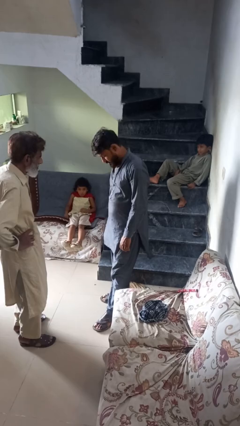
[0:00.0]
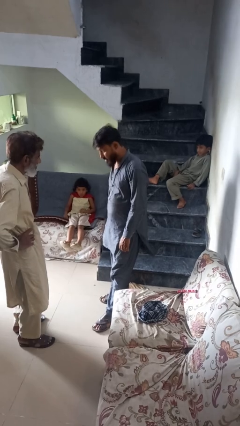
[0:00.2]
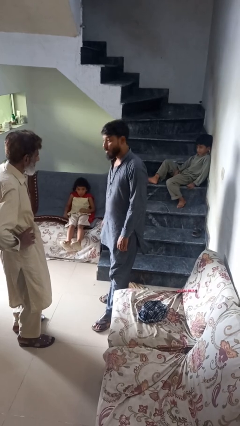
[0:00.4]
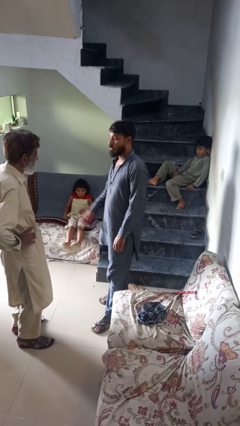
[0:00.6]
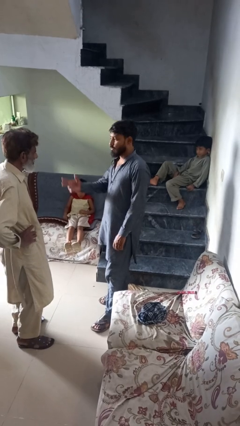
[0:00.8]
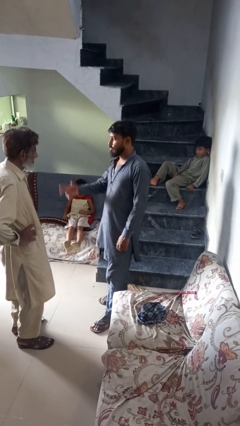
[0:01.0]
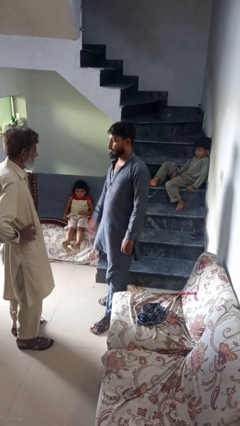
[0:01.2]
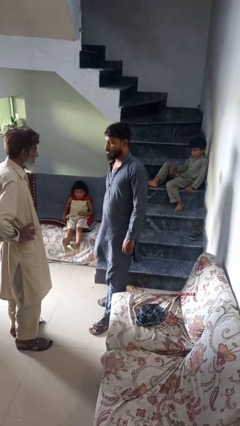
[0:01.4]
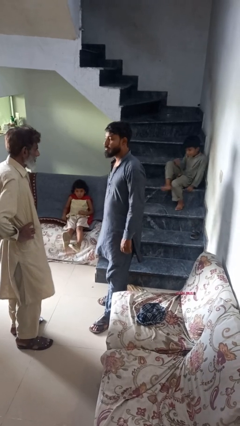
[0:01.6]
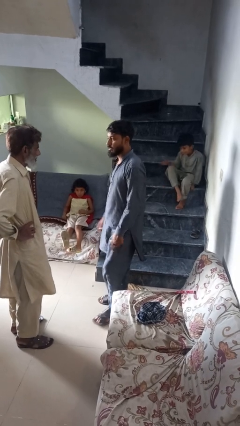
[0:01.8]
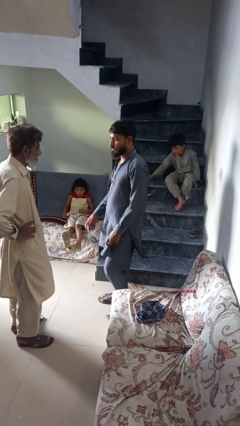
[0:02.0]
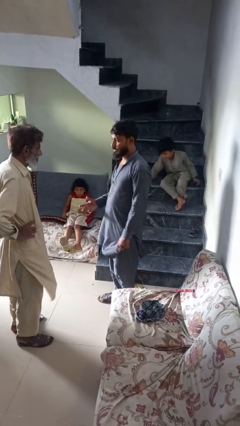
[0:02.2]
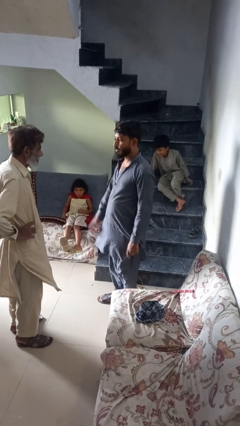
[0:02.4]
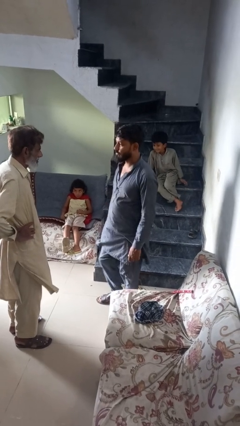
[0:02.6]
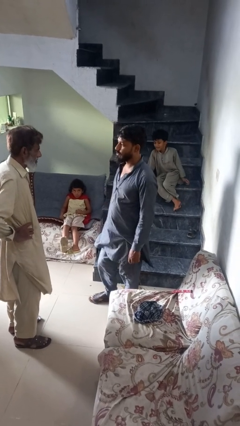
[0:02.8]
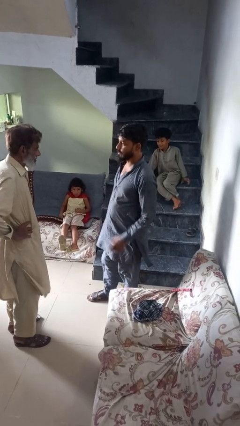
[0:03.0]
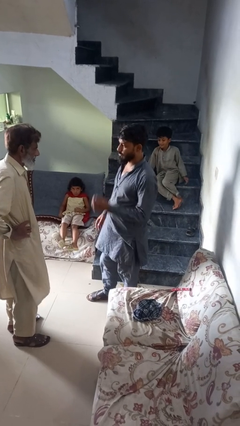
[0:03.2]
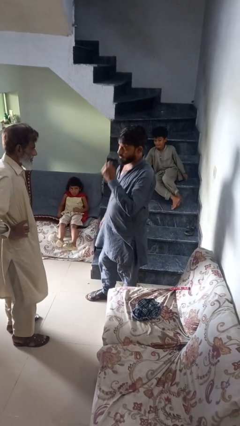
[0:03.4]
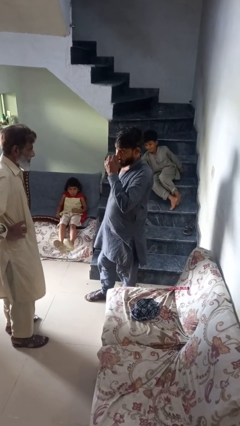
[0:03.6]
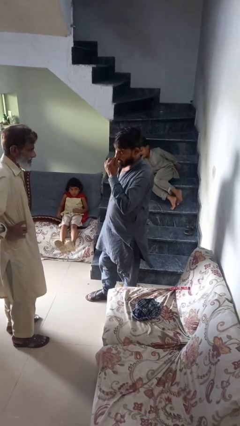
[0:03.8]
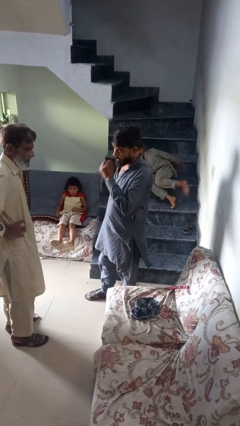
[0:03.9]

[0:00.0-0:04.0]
person talks to person

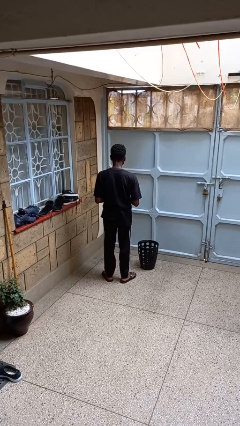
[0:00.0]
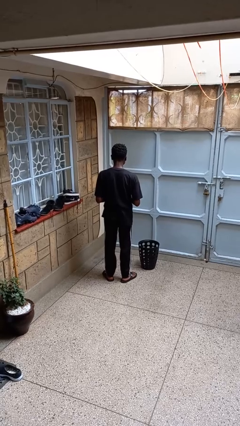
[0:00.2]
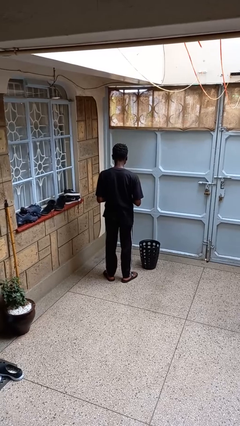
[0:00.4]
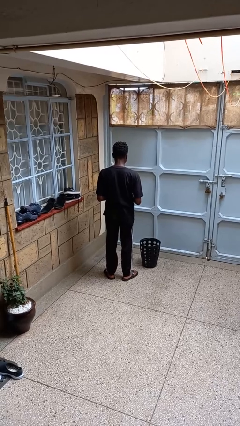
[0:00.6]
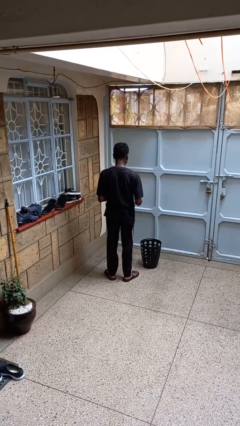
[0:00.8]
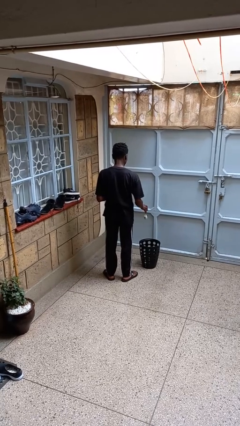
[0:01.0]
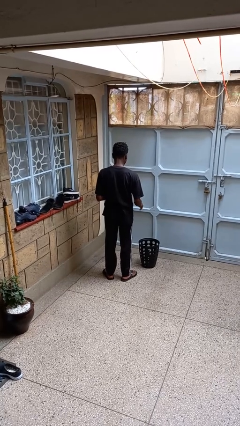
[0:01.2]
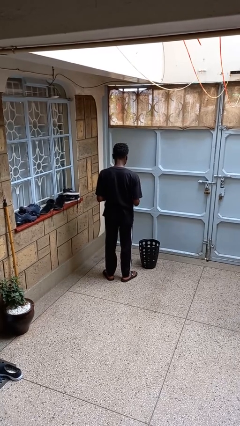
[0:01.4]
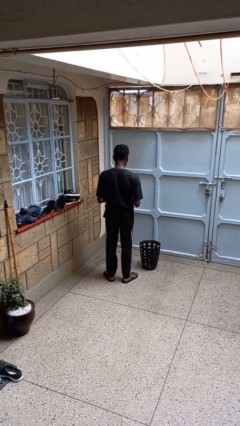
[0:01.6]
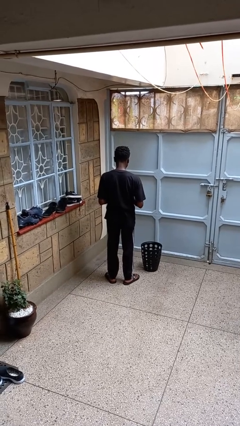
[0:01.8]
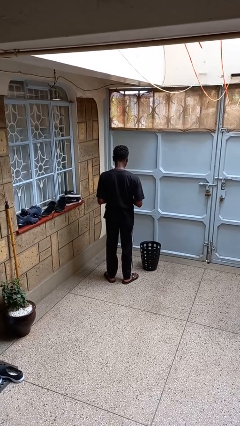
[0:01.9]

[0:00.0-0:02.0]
person discards trash

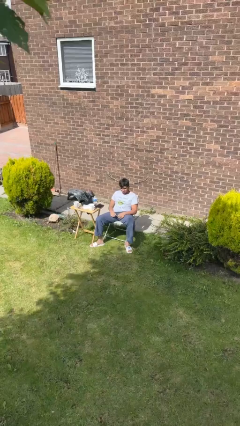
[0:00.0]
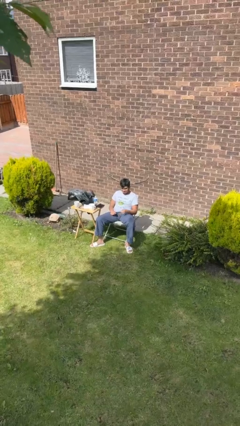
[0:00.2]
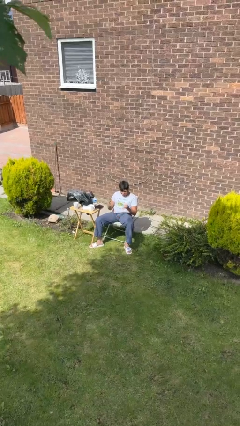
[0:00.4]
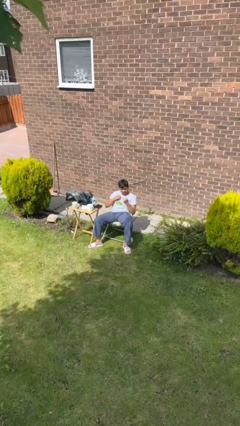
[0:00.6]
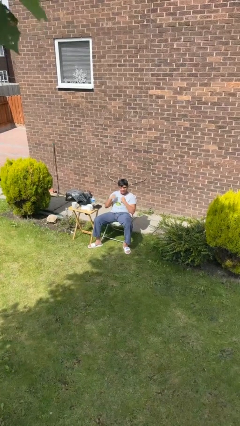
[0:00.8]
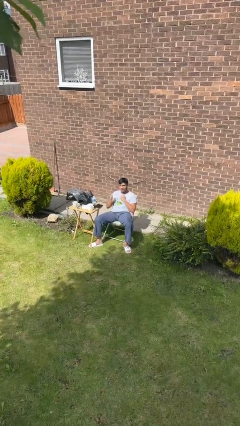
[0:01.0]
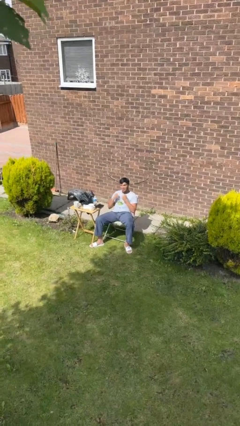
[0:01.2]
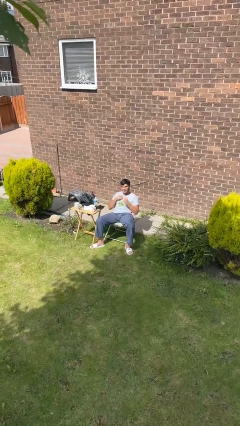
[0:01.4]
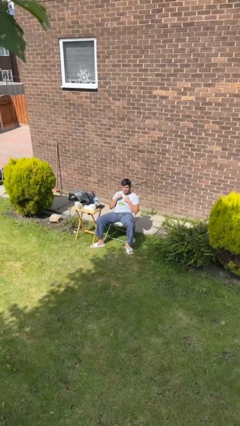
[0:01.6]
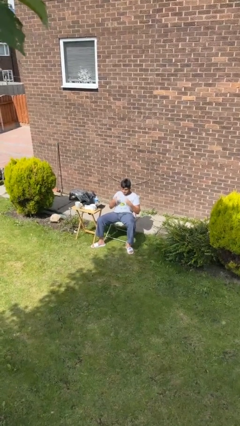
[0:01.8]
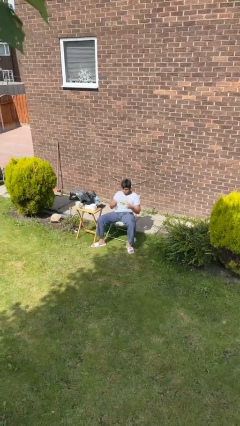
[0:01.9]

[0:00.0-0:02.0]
person drums on chest

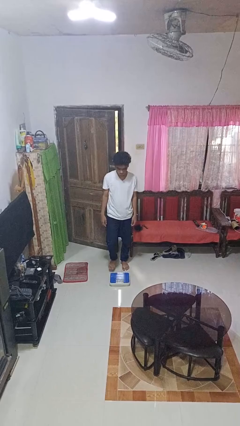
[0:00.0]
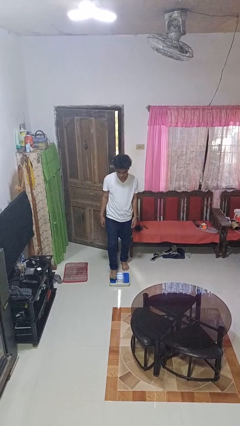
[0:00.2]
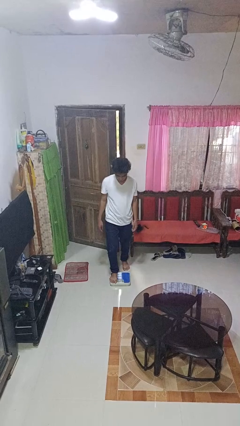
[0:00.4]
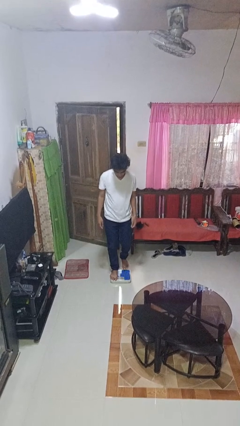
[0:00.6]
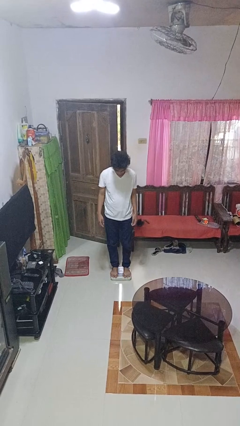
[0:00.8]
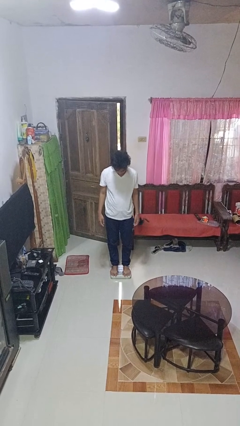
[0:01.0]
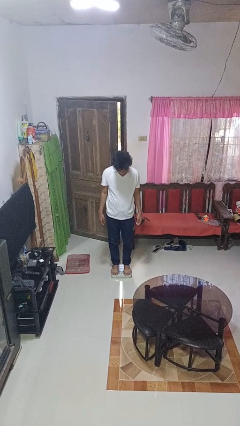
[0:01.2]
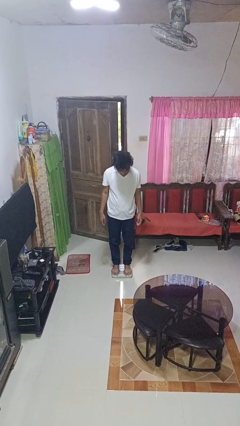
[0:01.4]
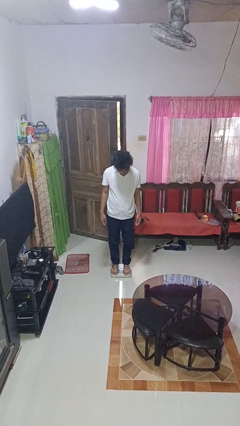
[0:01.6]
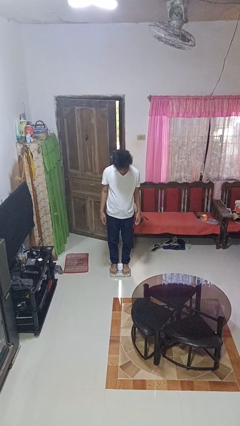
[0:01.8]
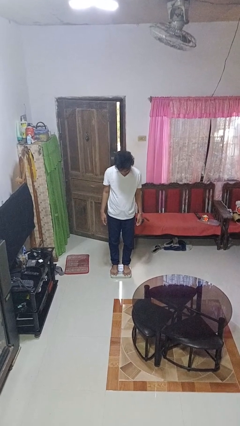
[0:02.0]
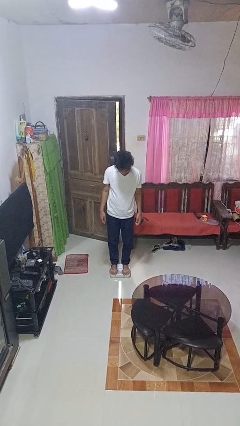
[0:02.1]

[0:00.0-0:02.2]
person uses bodyweight scale

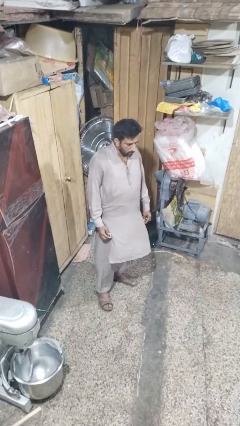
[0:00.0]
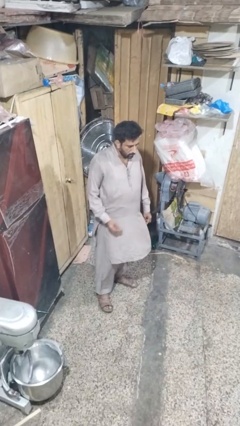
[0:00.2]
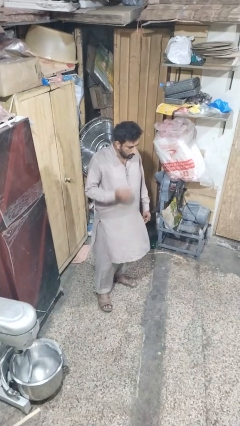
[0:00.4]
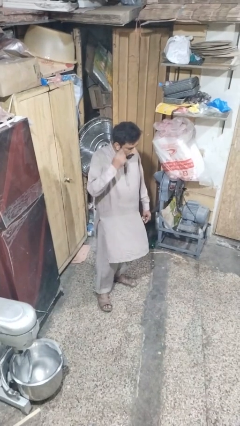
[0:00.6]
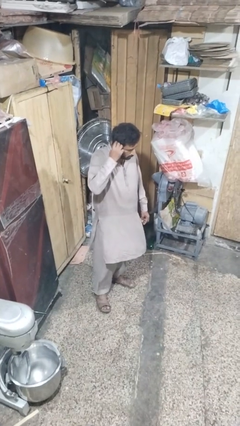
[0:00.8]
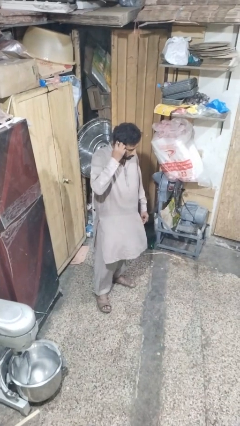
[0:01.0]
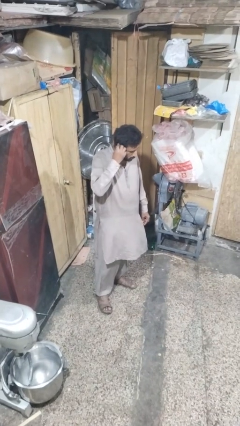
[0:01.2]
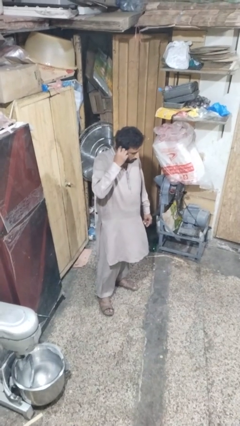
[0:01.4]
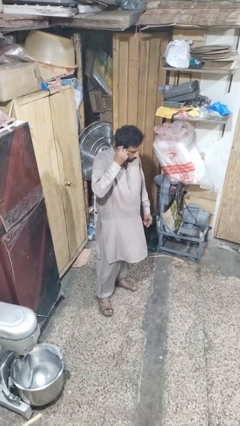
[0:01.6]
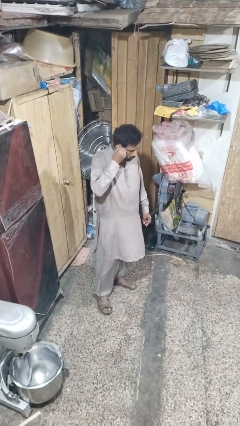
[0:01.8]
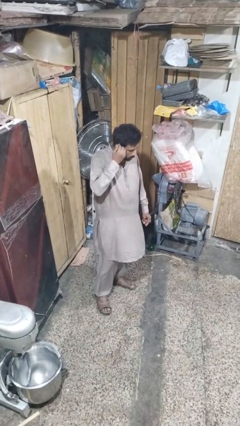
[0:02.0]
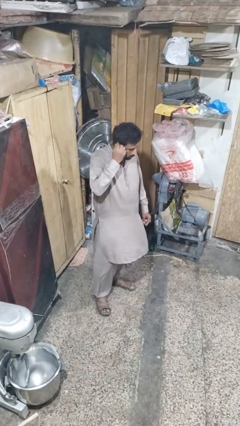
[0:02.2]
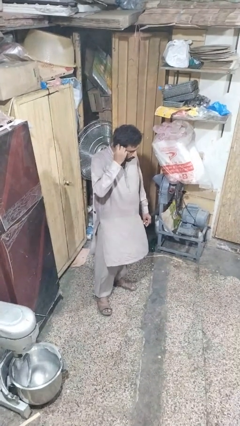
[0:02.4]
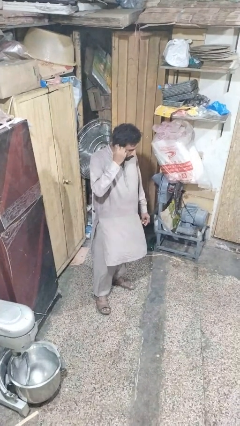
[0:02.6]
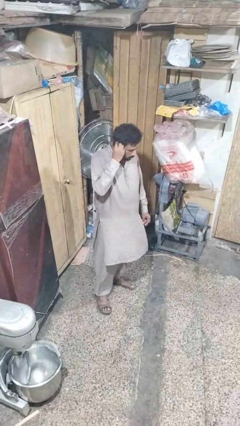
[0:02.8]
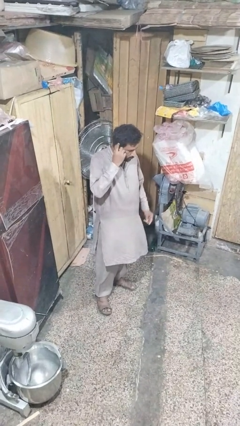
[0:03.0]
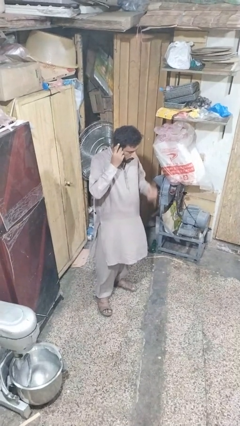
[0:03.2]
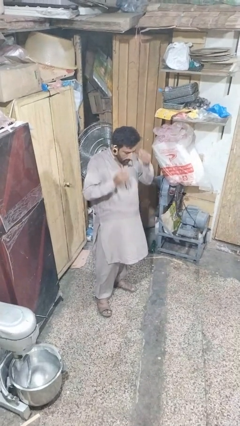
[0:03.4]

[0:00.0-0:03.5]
person puts on earrings

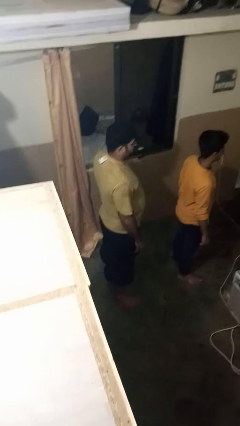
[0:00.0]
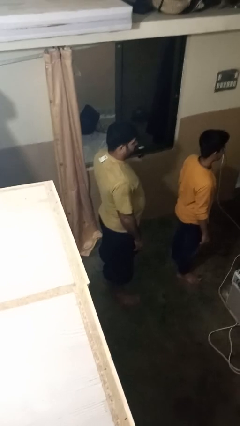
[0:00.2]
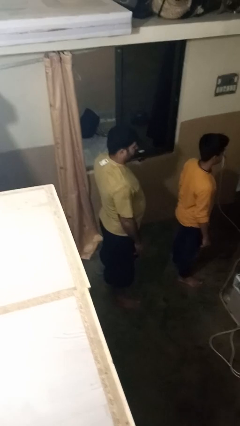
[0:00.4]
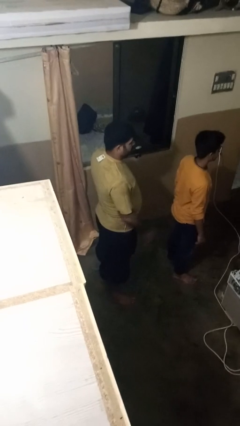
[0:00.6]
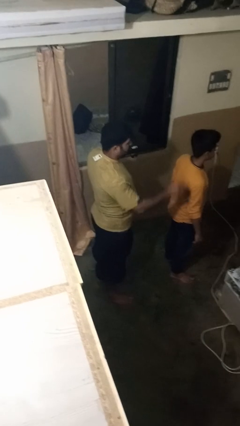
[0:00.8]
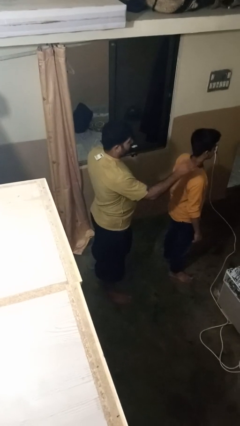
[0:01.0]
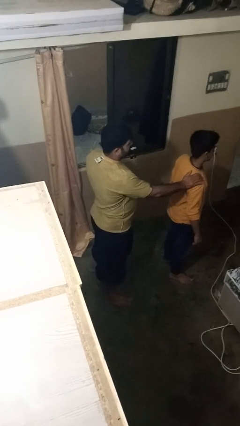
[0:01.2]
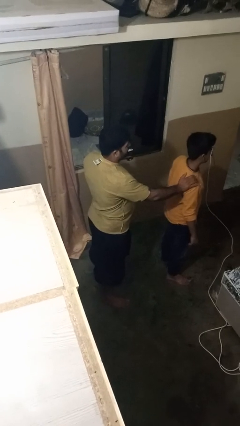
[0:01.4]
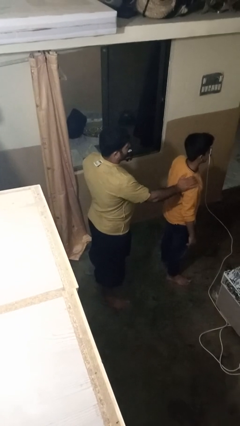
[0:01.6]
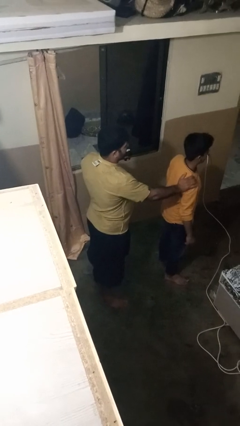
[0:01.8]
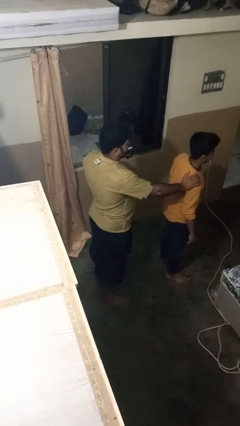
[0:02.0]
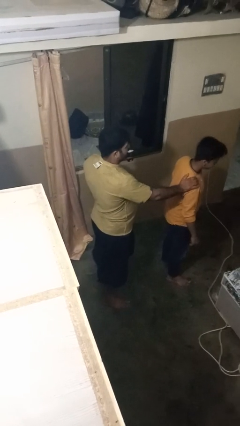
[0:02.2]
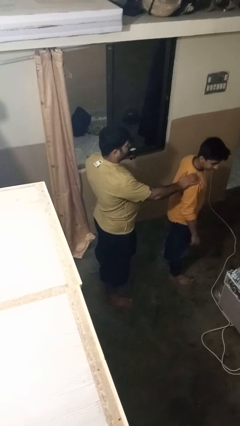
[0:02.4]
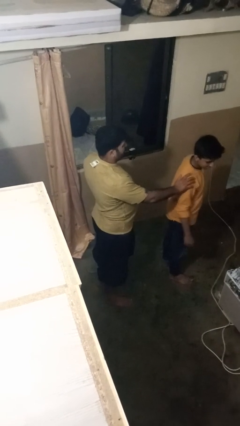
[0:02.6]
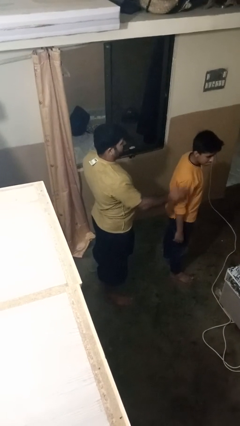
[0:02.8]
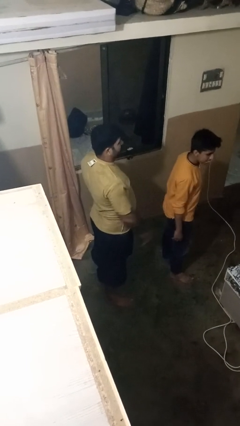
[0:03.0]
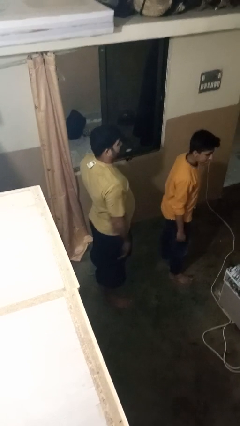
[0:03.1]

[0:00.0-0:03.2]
person waves at person

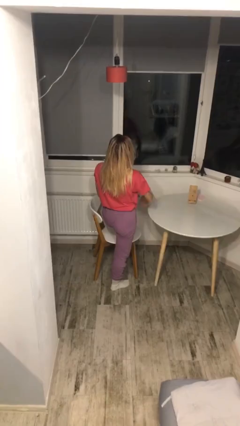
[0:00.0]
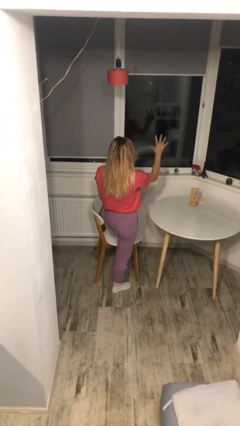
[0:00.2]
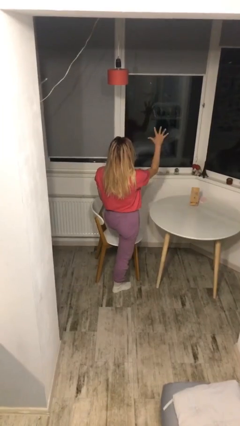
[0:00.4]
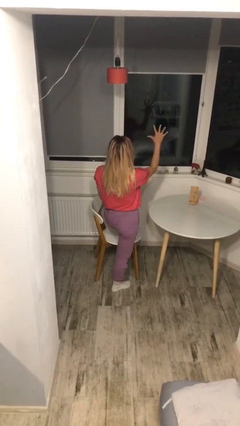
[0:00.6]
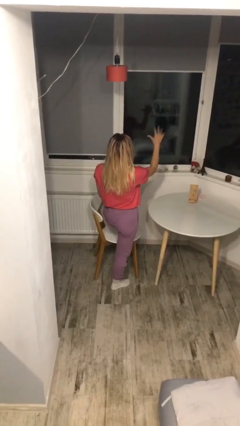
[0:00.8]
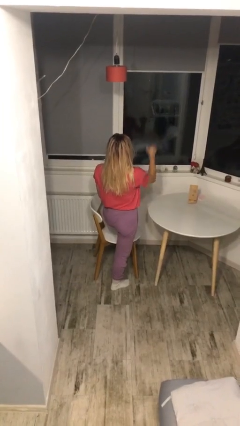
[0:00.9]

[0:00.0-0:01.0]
person gestures number five
